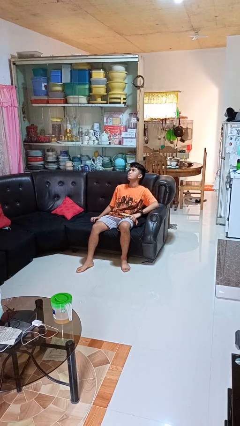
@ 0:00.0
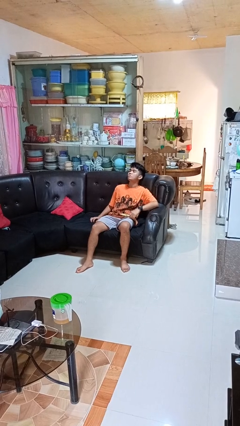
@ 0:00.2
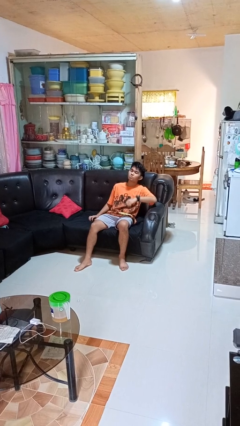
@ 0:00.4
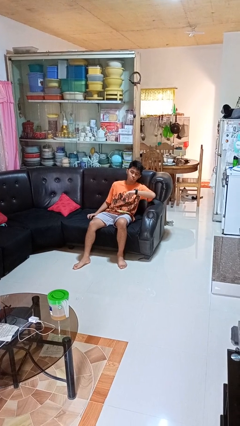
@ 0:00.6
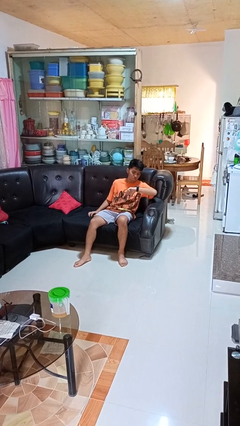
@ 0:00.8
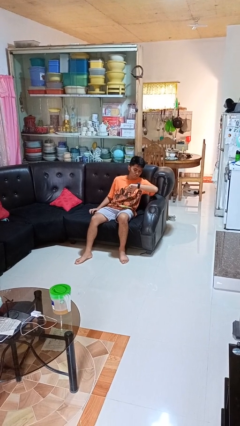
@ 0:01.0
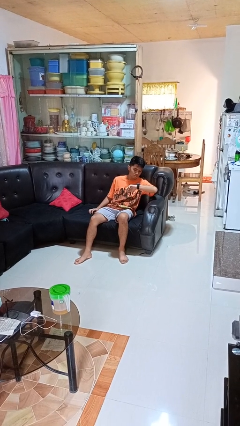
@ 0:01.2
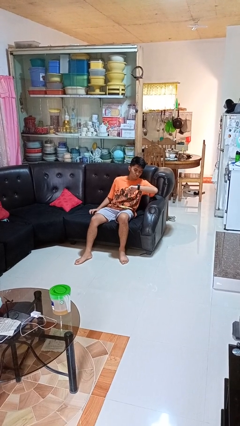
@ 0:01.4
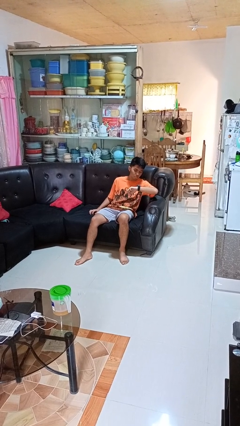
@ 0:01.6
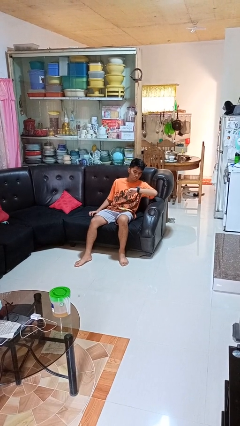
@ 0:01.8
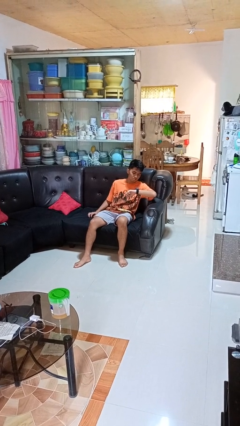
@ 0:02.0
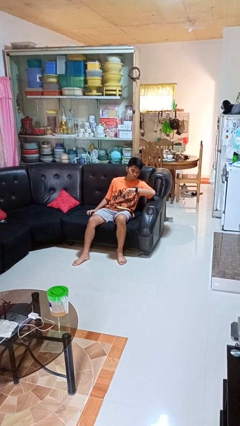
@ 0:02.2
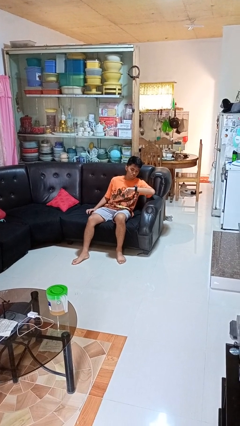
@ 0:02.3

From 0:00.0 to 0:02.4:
person looks at wristwatch

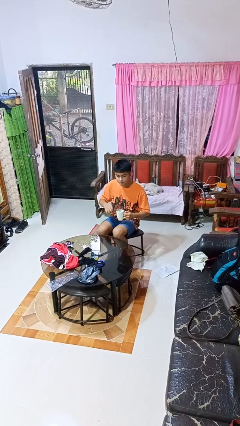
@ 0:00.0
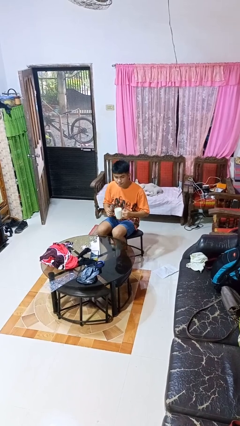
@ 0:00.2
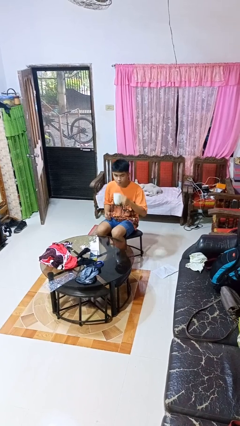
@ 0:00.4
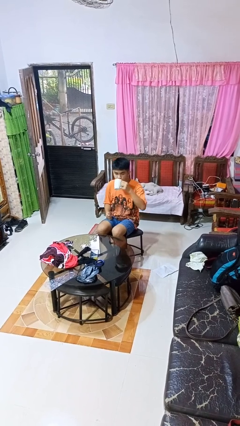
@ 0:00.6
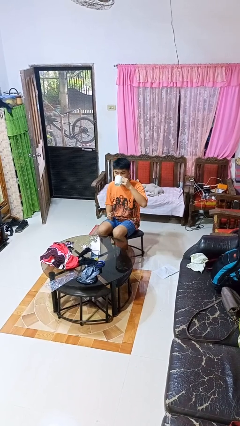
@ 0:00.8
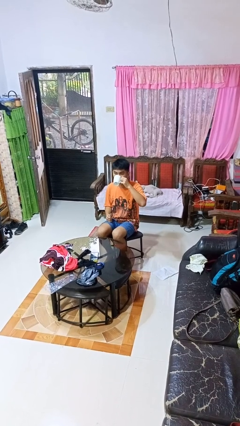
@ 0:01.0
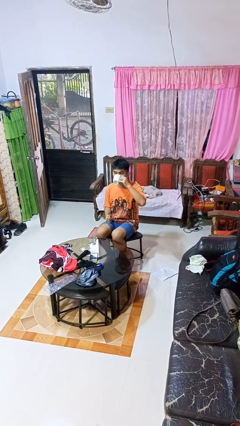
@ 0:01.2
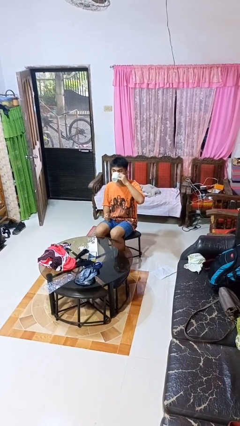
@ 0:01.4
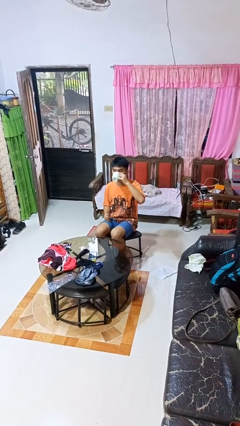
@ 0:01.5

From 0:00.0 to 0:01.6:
person drinks from mug

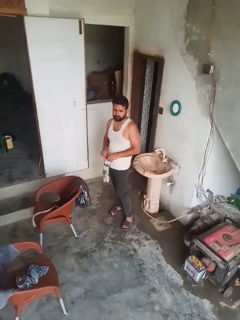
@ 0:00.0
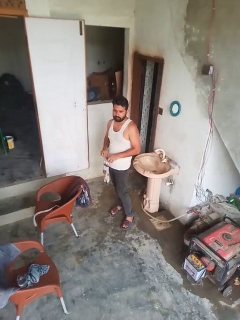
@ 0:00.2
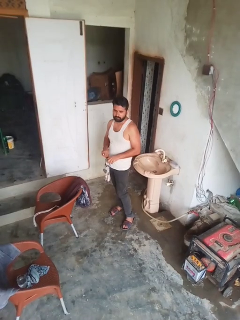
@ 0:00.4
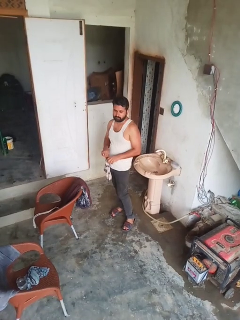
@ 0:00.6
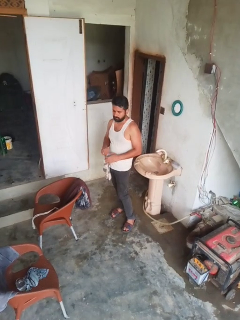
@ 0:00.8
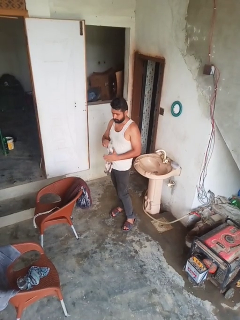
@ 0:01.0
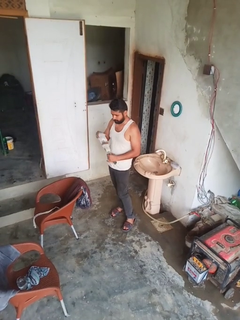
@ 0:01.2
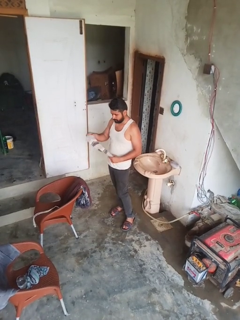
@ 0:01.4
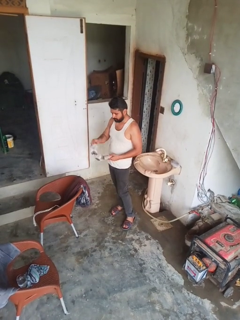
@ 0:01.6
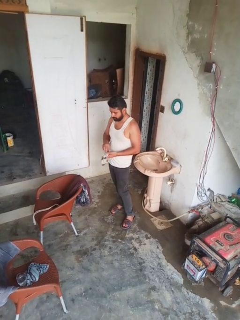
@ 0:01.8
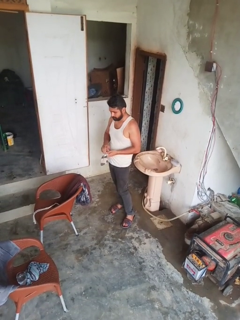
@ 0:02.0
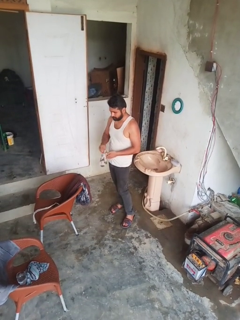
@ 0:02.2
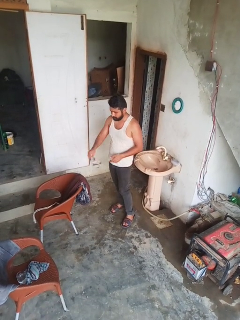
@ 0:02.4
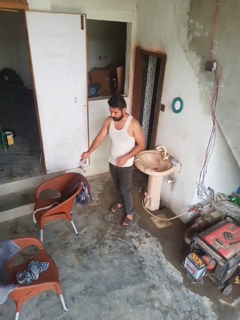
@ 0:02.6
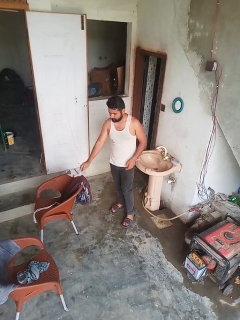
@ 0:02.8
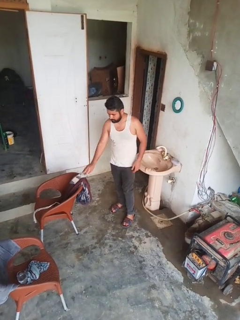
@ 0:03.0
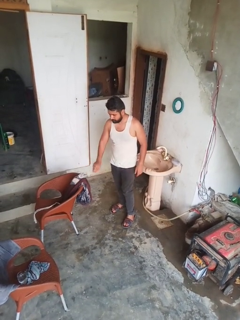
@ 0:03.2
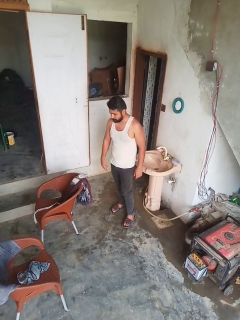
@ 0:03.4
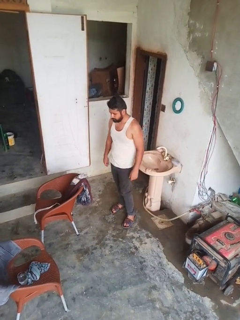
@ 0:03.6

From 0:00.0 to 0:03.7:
person folds socks

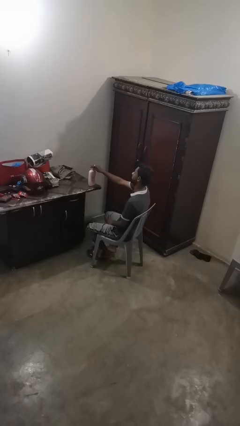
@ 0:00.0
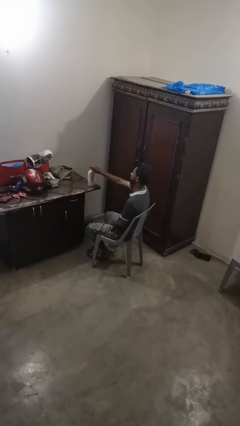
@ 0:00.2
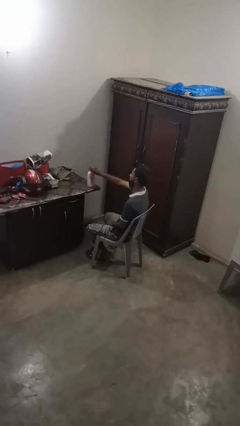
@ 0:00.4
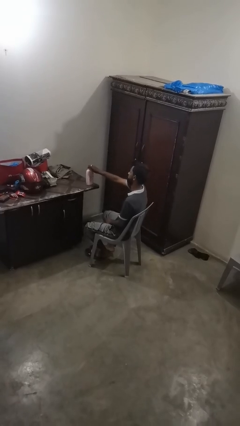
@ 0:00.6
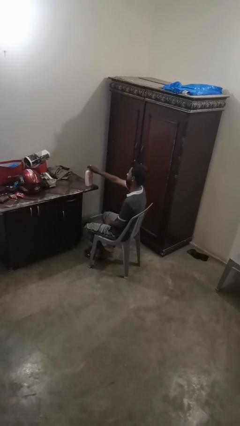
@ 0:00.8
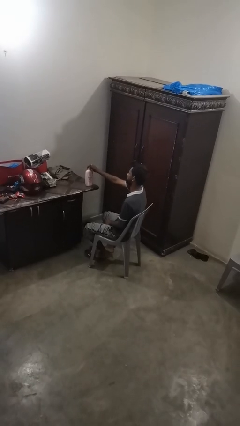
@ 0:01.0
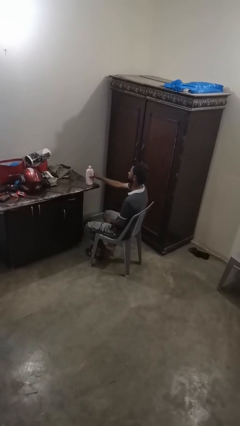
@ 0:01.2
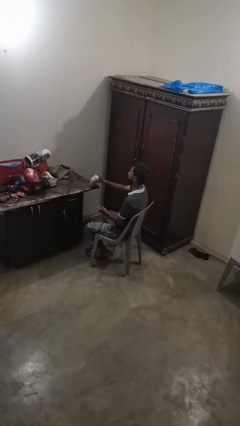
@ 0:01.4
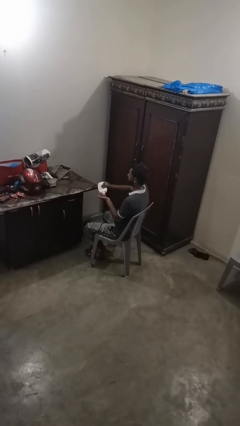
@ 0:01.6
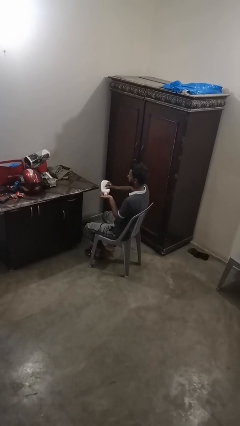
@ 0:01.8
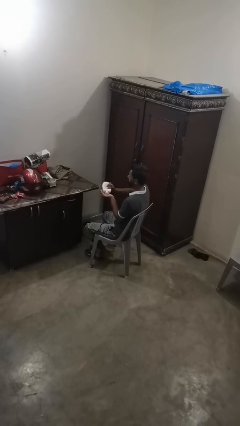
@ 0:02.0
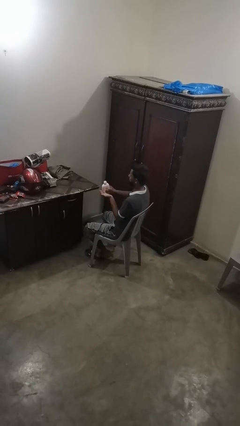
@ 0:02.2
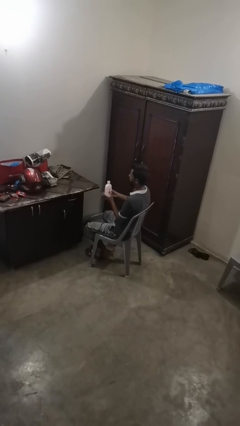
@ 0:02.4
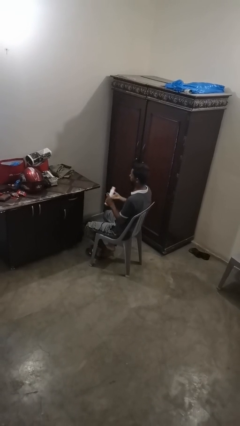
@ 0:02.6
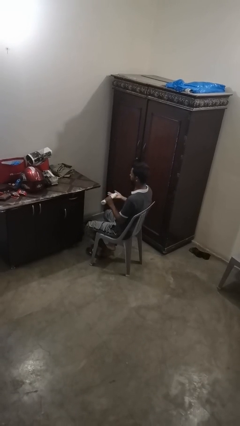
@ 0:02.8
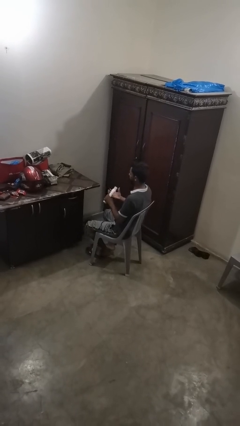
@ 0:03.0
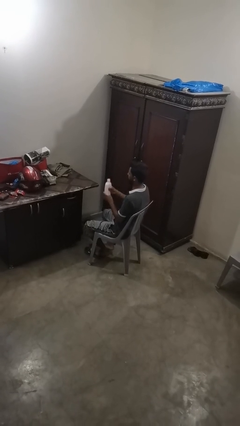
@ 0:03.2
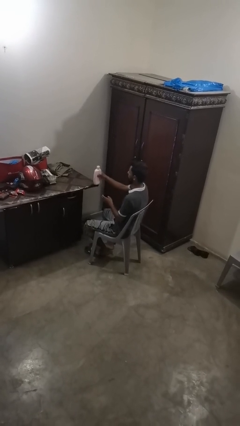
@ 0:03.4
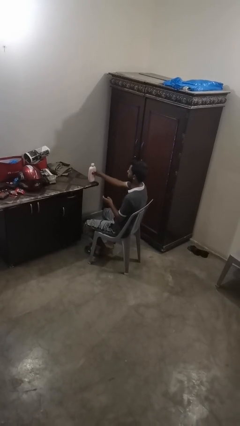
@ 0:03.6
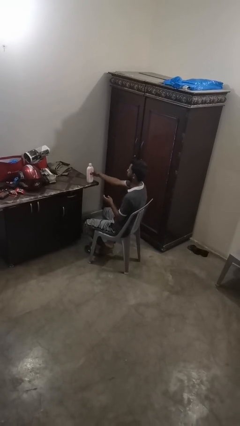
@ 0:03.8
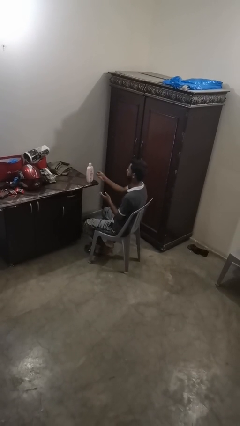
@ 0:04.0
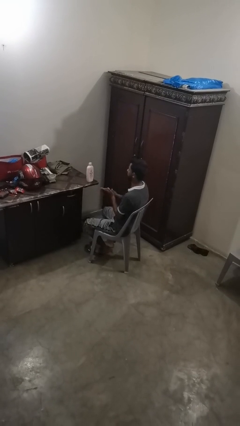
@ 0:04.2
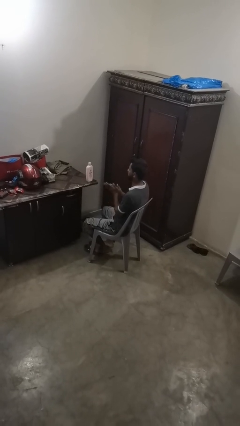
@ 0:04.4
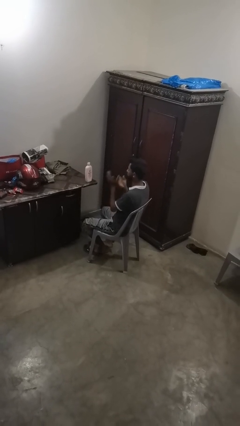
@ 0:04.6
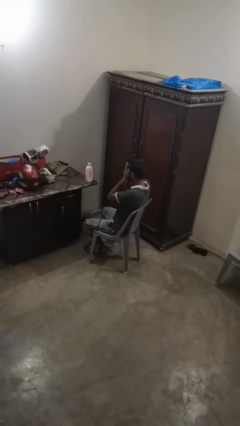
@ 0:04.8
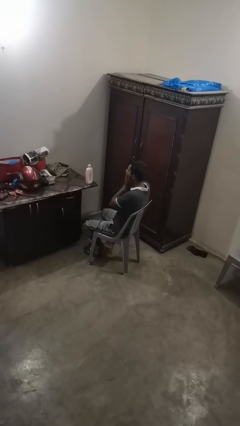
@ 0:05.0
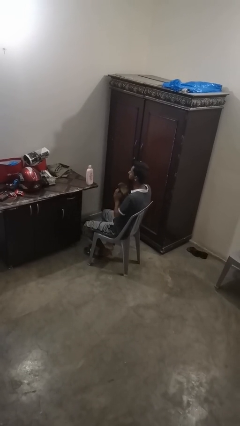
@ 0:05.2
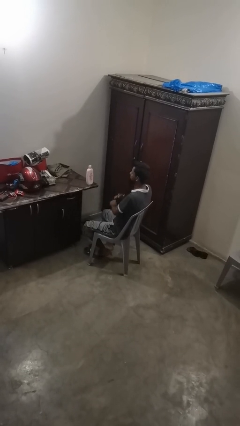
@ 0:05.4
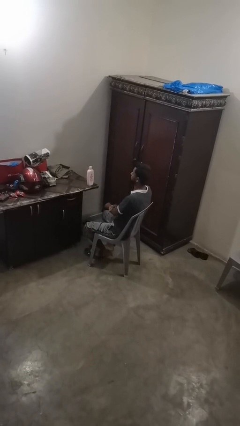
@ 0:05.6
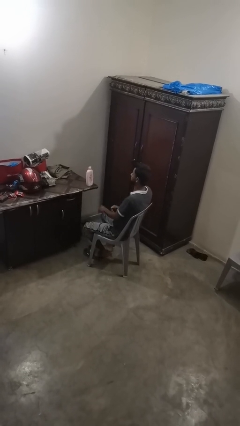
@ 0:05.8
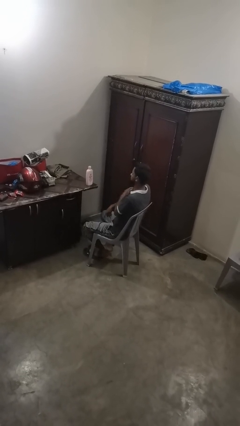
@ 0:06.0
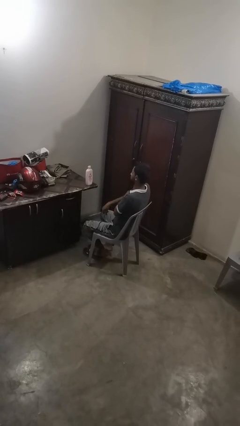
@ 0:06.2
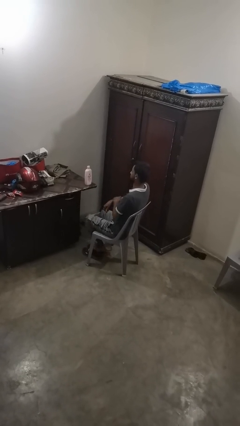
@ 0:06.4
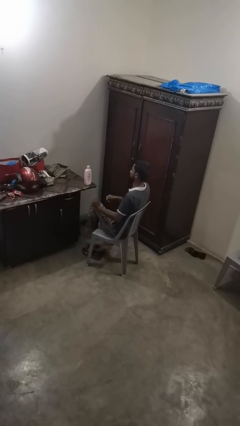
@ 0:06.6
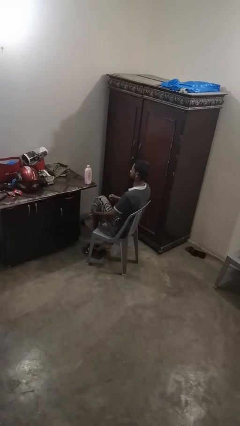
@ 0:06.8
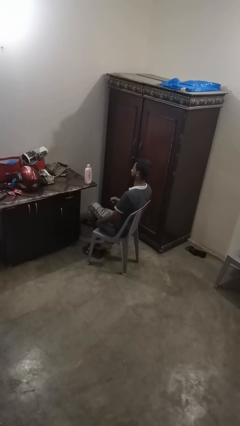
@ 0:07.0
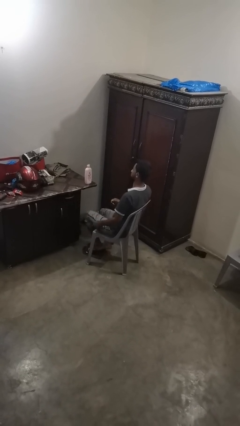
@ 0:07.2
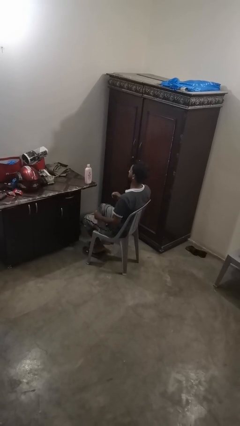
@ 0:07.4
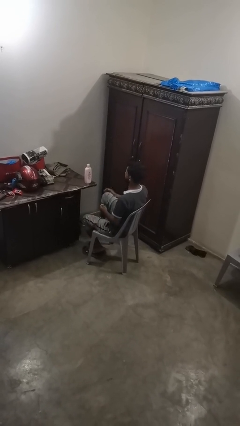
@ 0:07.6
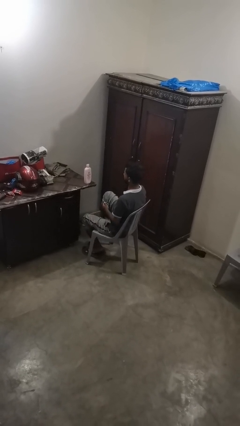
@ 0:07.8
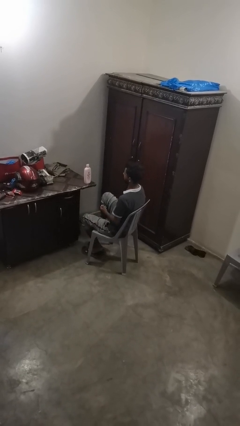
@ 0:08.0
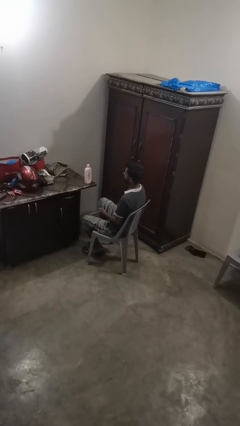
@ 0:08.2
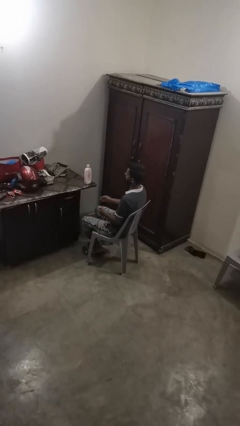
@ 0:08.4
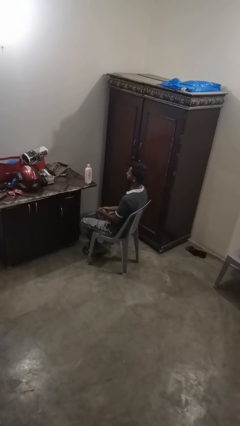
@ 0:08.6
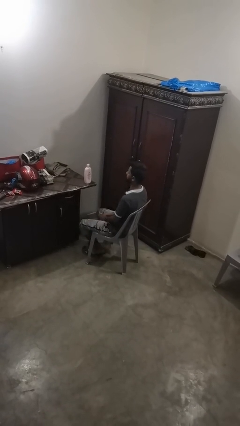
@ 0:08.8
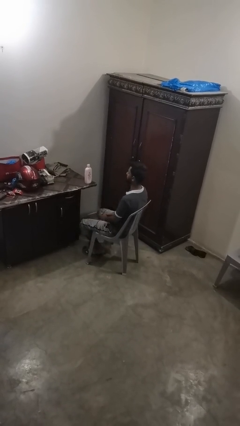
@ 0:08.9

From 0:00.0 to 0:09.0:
person applies sunscreen

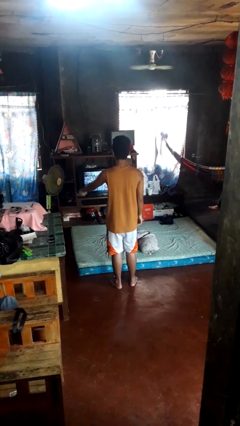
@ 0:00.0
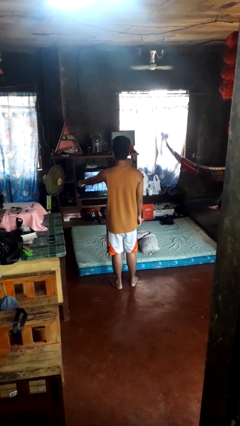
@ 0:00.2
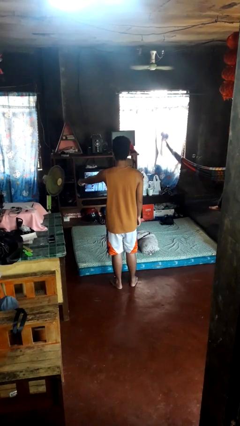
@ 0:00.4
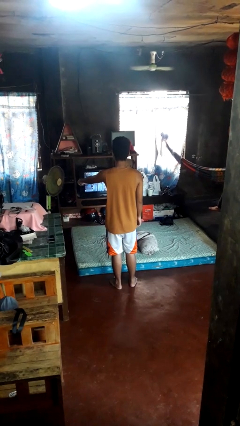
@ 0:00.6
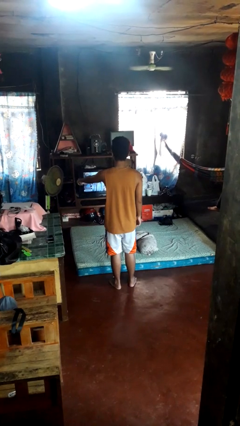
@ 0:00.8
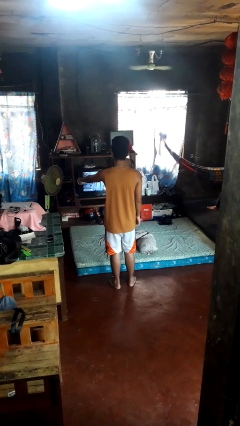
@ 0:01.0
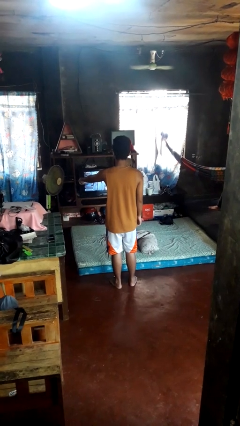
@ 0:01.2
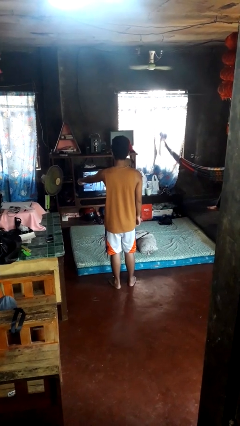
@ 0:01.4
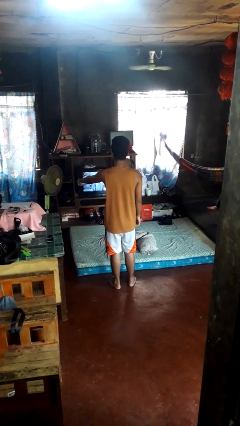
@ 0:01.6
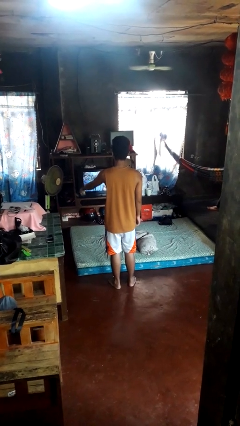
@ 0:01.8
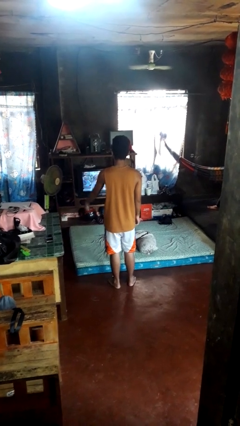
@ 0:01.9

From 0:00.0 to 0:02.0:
person uses television remote
